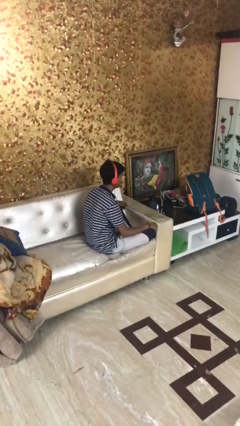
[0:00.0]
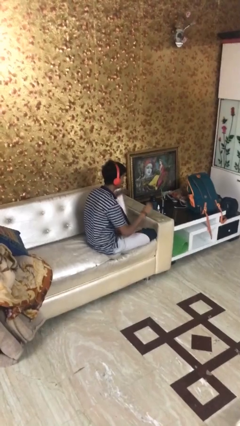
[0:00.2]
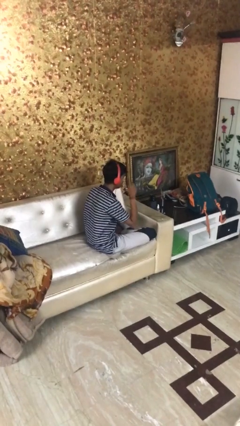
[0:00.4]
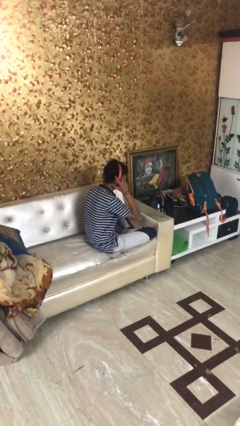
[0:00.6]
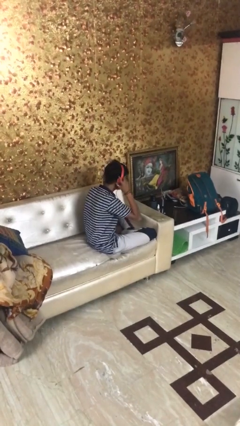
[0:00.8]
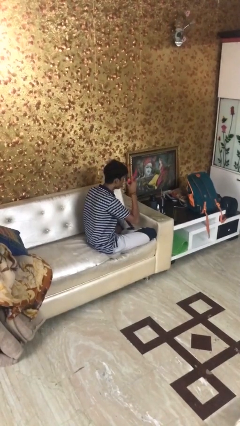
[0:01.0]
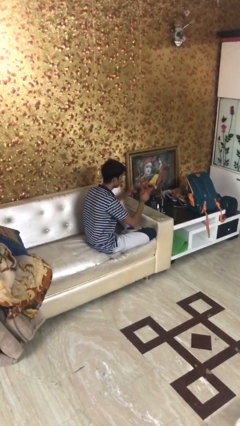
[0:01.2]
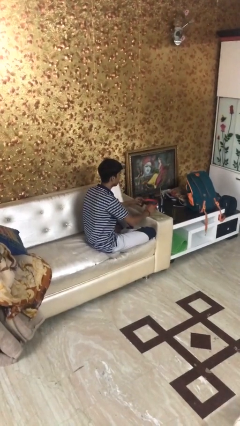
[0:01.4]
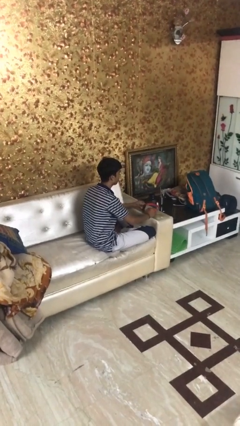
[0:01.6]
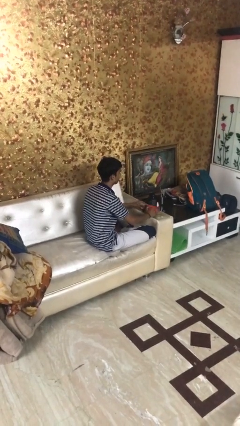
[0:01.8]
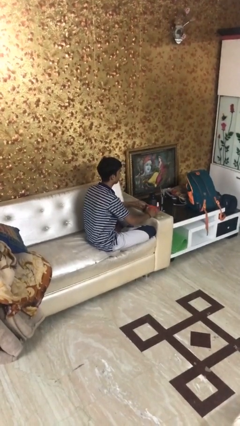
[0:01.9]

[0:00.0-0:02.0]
person takes off headphones

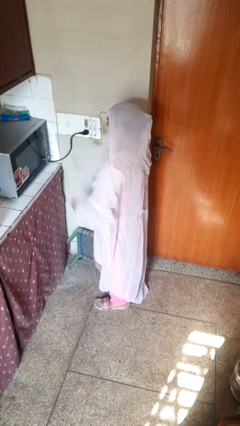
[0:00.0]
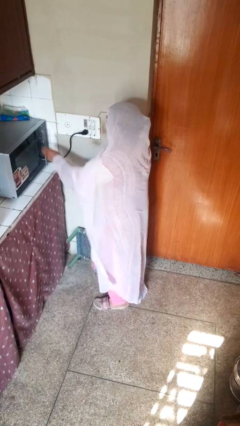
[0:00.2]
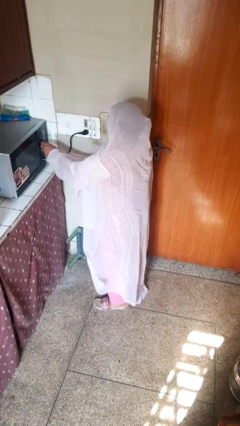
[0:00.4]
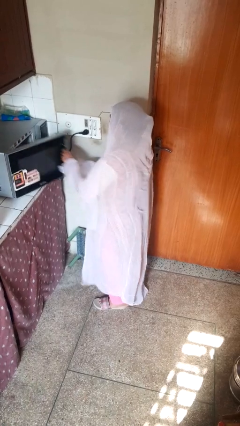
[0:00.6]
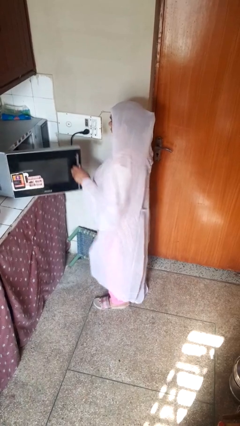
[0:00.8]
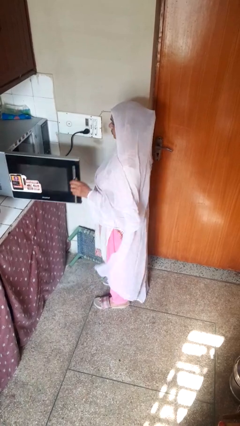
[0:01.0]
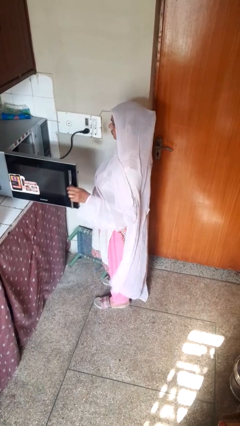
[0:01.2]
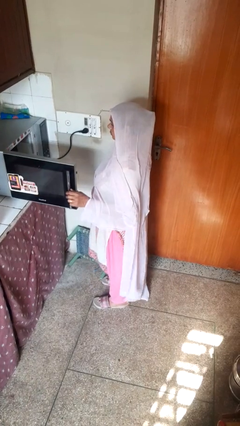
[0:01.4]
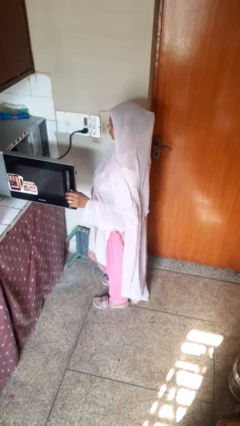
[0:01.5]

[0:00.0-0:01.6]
person opens oven door
